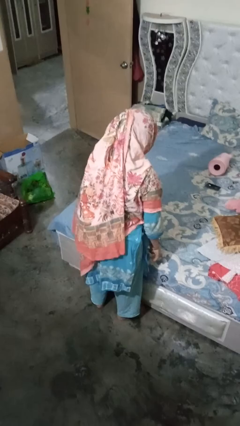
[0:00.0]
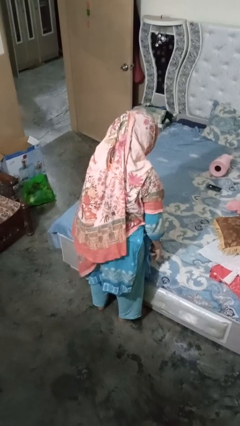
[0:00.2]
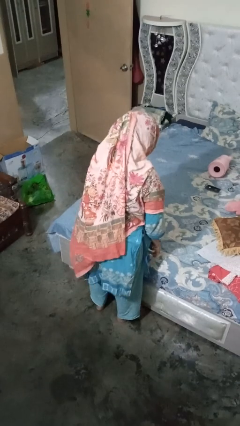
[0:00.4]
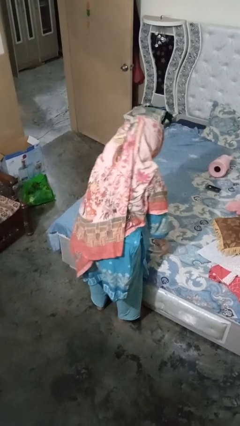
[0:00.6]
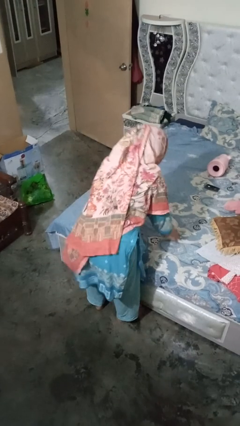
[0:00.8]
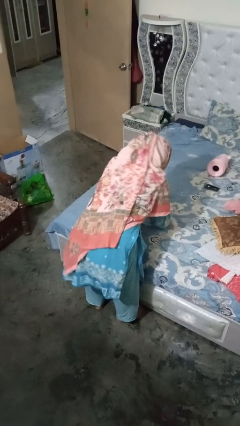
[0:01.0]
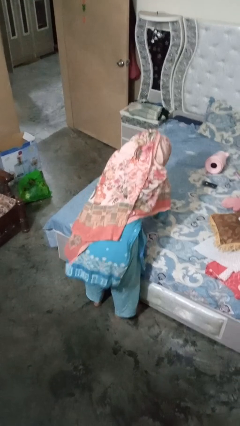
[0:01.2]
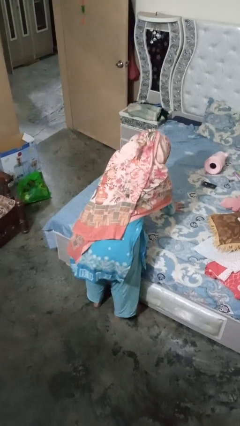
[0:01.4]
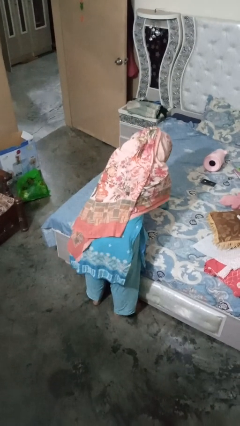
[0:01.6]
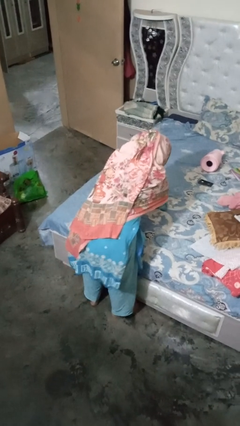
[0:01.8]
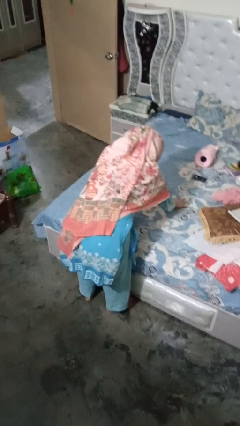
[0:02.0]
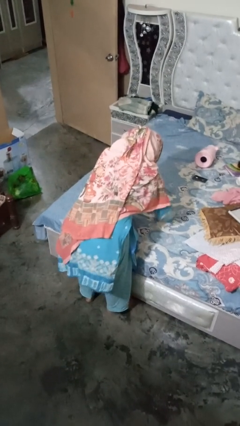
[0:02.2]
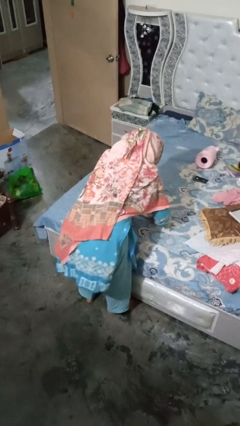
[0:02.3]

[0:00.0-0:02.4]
person searches under bed

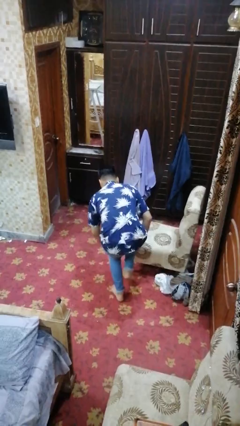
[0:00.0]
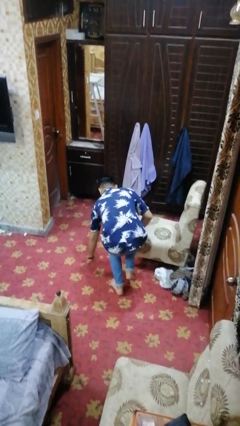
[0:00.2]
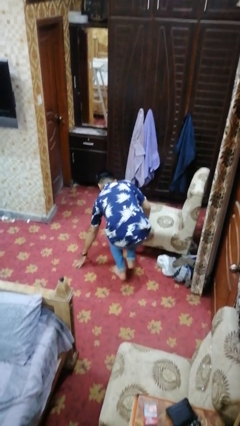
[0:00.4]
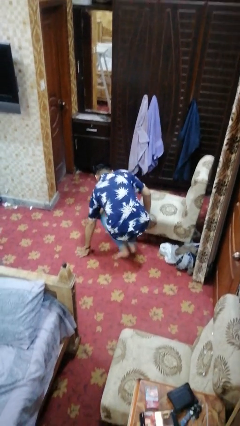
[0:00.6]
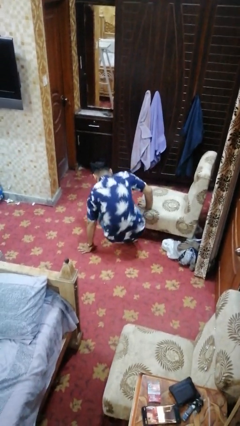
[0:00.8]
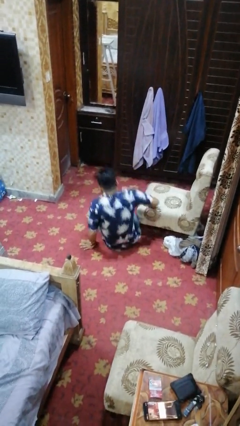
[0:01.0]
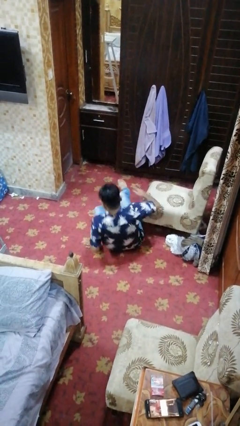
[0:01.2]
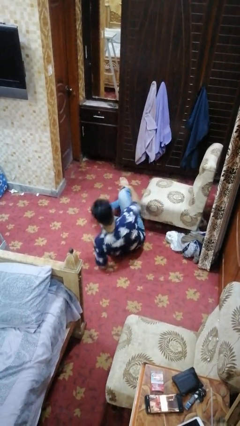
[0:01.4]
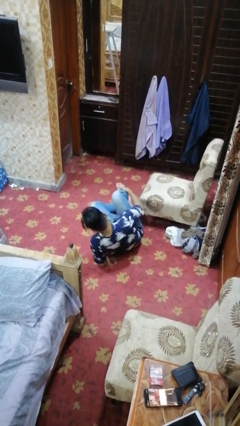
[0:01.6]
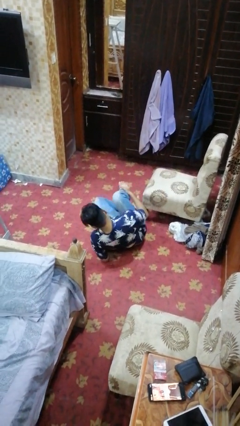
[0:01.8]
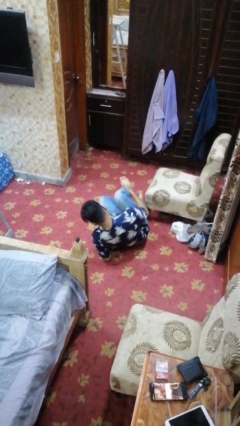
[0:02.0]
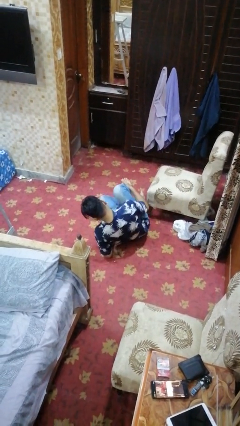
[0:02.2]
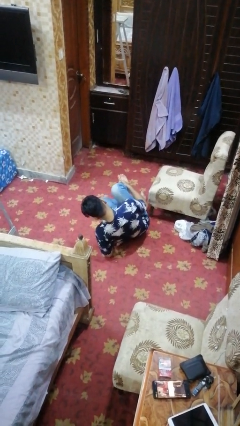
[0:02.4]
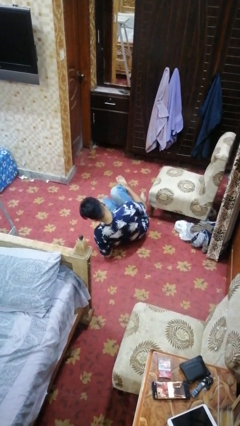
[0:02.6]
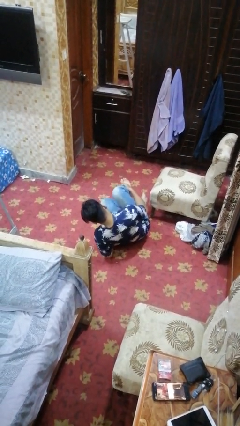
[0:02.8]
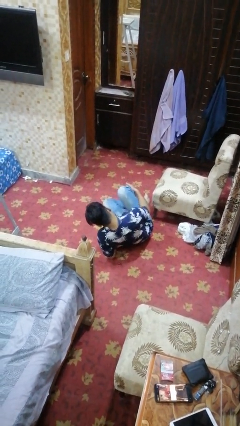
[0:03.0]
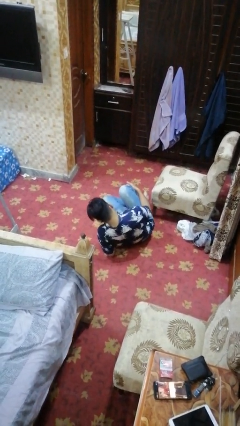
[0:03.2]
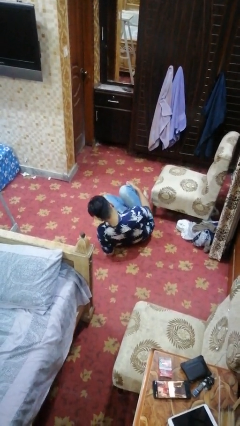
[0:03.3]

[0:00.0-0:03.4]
person lies down on floor

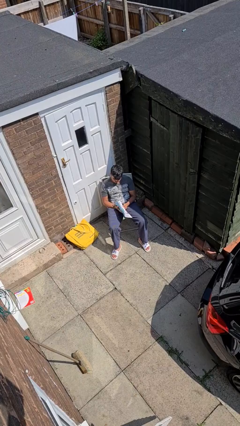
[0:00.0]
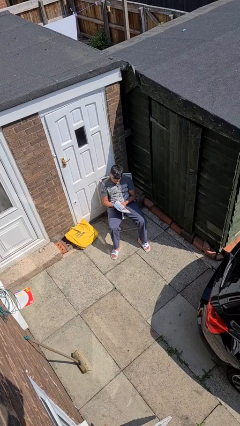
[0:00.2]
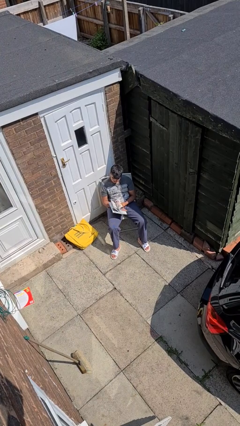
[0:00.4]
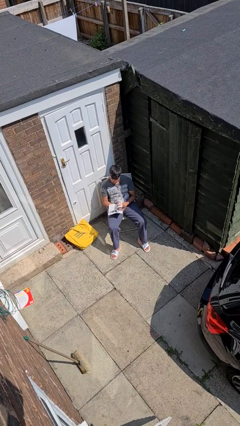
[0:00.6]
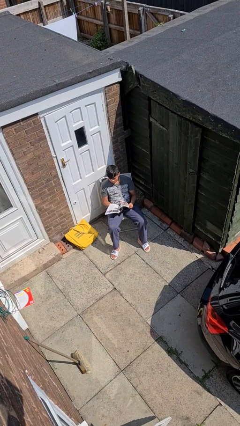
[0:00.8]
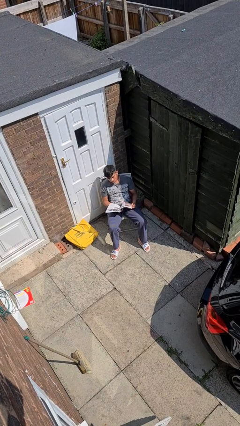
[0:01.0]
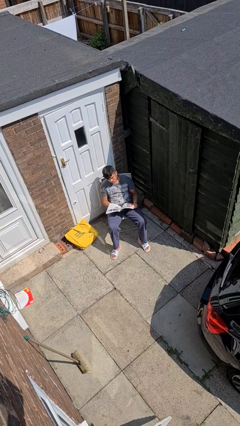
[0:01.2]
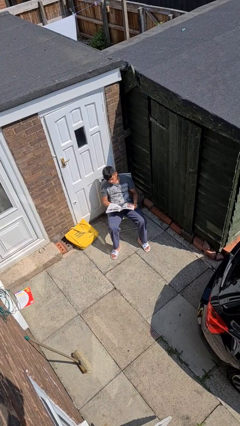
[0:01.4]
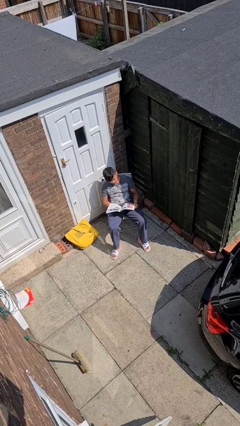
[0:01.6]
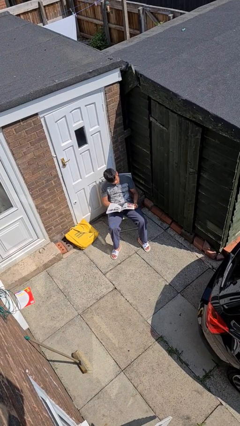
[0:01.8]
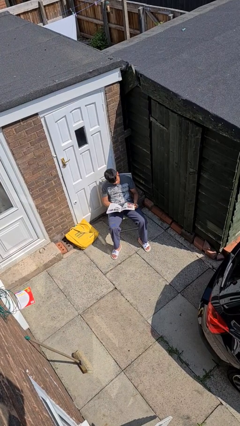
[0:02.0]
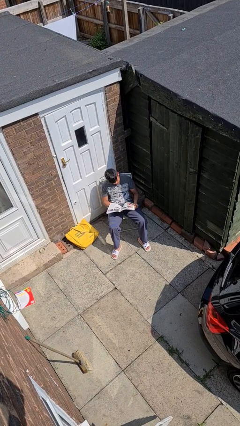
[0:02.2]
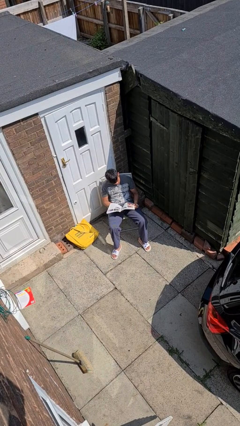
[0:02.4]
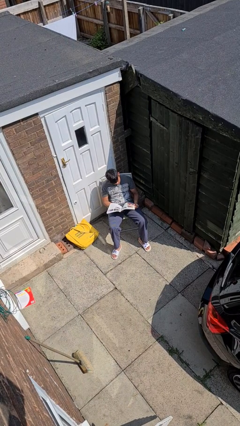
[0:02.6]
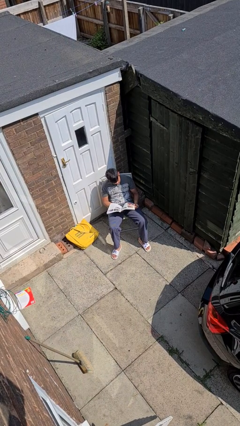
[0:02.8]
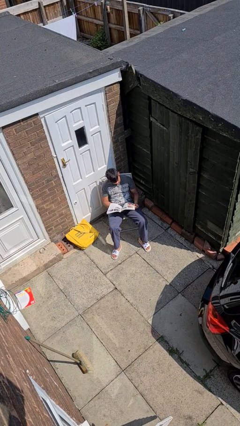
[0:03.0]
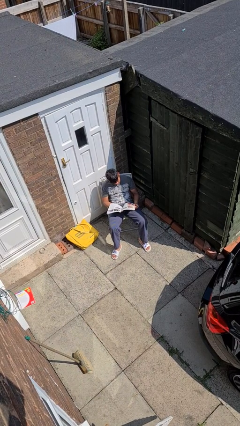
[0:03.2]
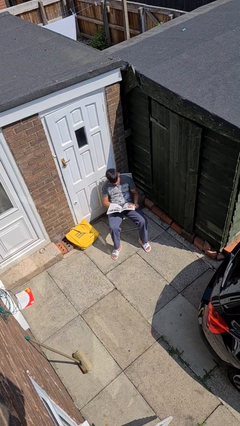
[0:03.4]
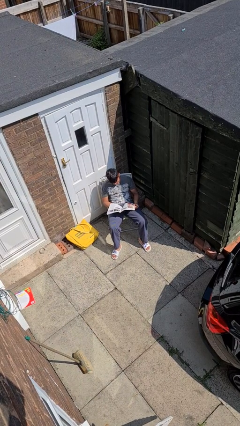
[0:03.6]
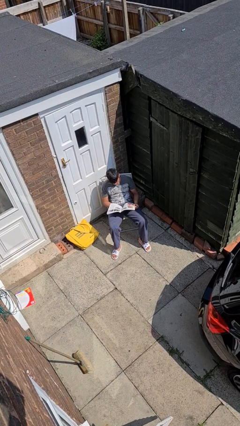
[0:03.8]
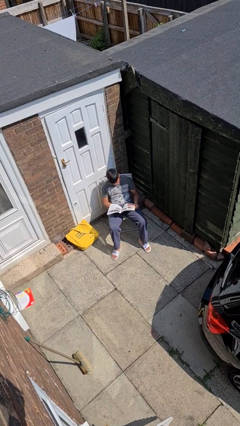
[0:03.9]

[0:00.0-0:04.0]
person reads newspaper

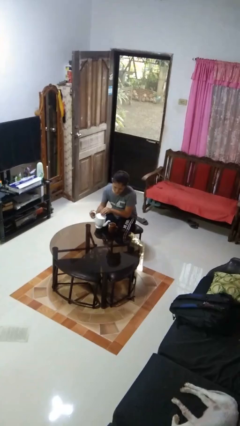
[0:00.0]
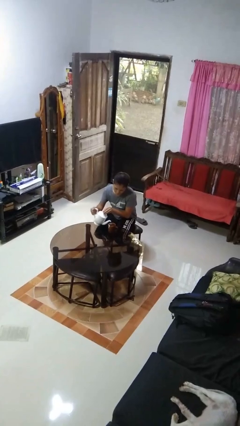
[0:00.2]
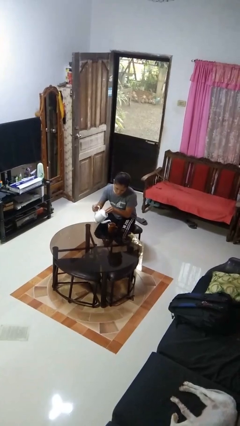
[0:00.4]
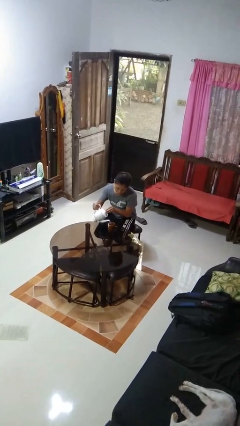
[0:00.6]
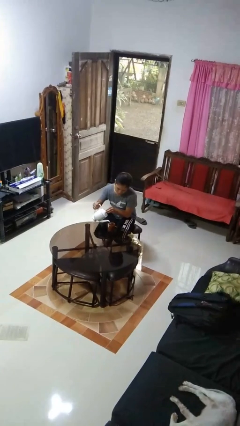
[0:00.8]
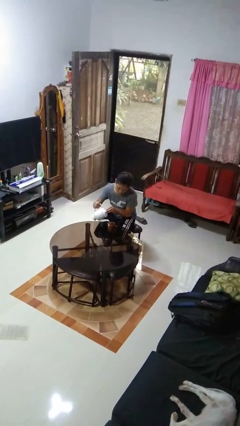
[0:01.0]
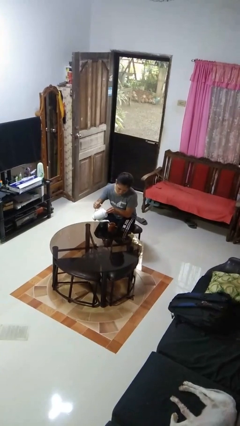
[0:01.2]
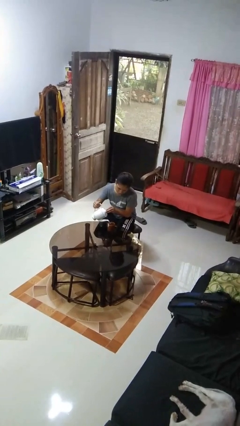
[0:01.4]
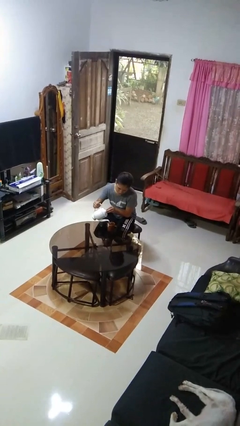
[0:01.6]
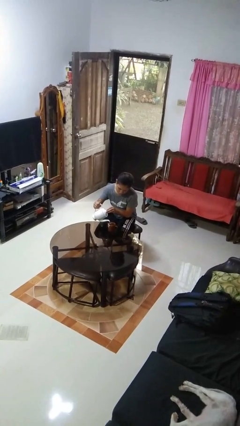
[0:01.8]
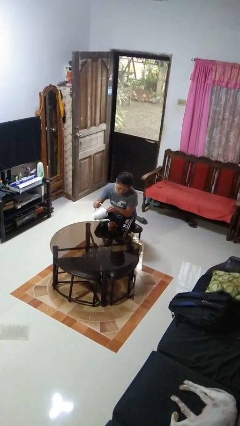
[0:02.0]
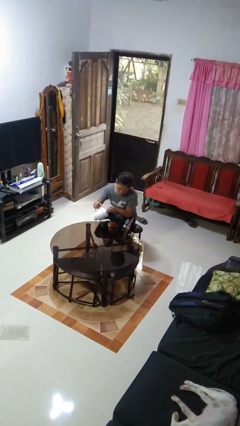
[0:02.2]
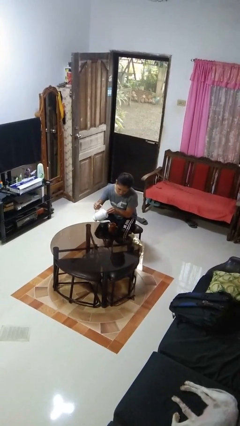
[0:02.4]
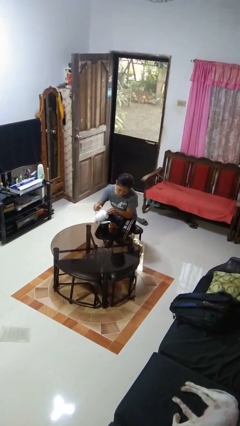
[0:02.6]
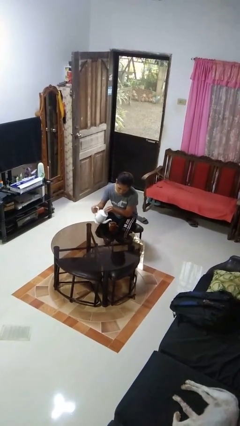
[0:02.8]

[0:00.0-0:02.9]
person pours coffee into mug

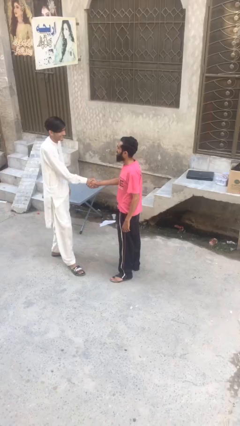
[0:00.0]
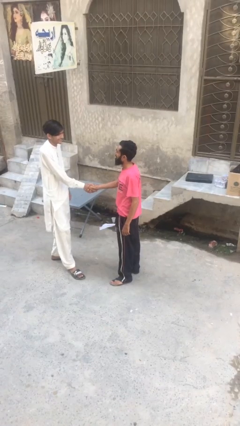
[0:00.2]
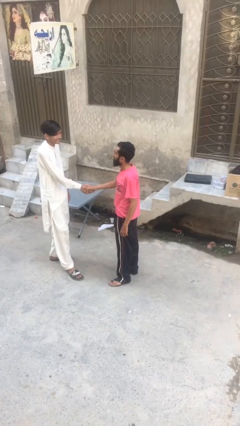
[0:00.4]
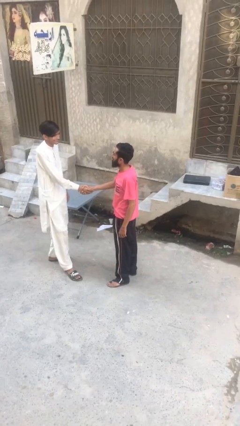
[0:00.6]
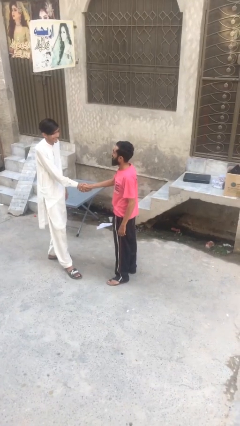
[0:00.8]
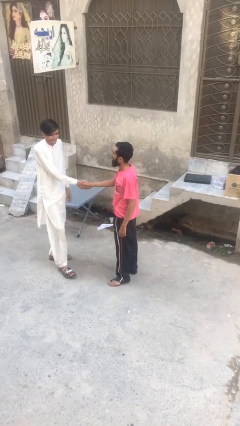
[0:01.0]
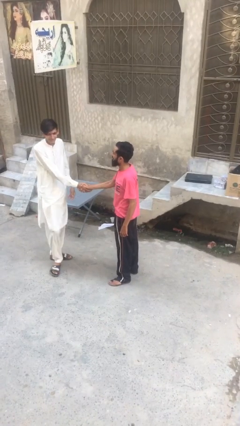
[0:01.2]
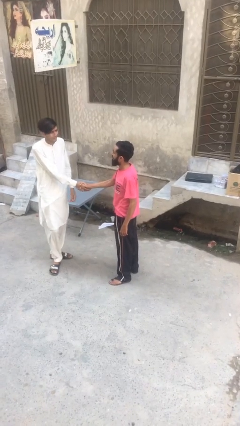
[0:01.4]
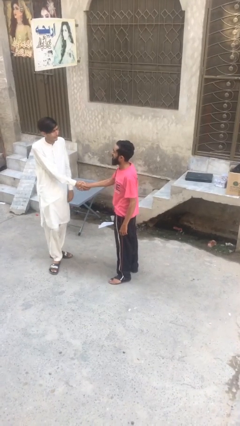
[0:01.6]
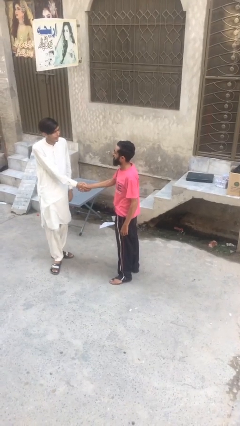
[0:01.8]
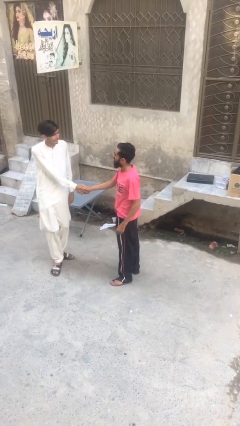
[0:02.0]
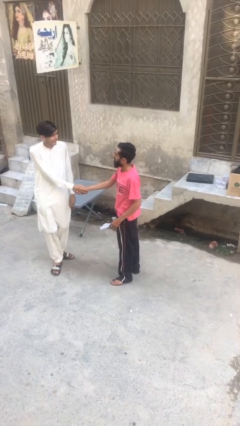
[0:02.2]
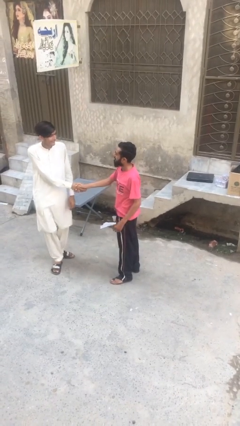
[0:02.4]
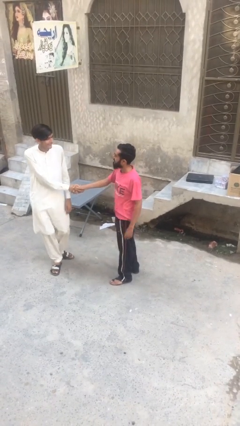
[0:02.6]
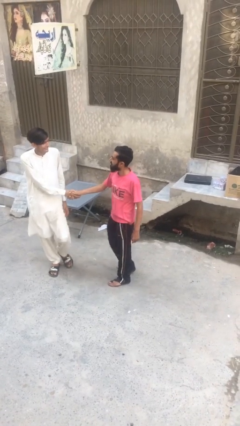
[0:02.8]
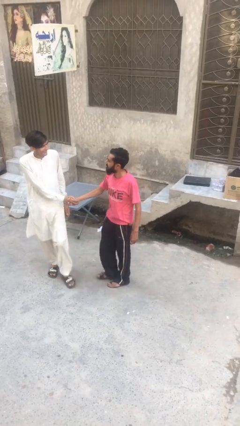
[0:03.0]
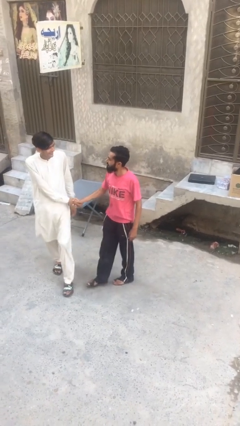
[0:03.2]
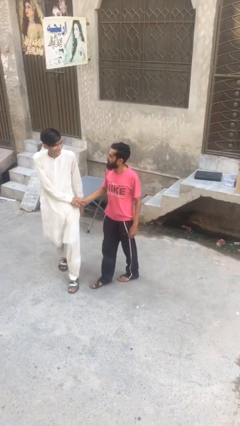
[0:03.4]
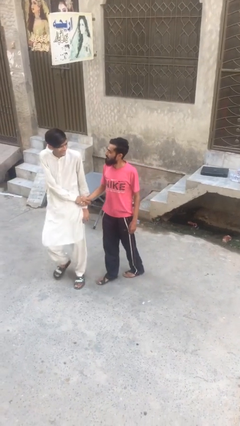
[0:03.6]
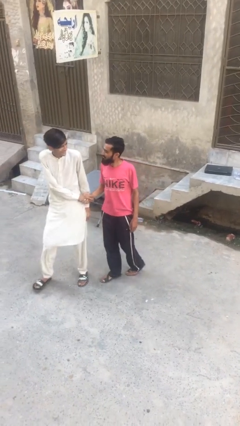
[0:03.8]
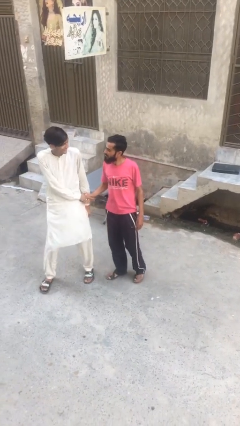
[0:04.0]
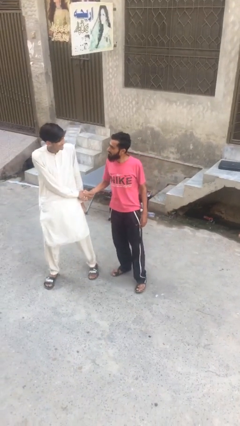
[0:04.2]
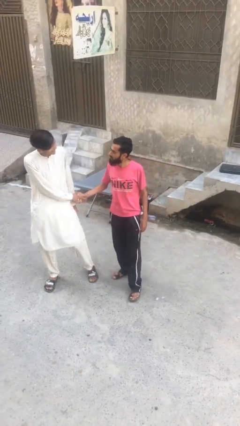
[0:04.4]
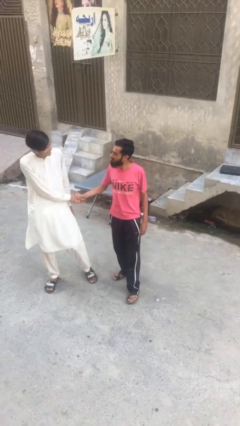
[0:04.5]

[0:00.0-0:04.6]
person talks to person
